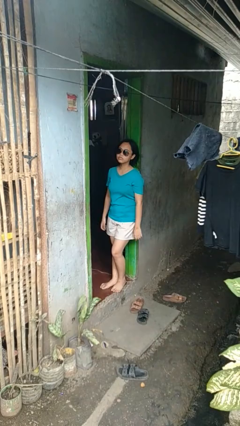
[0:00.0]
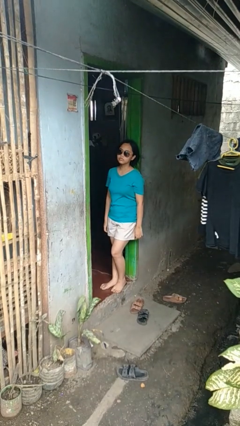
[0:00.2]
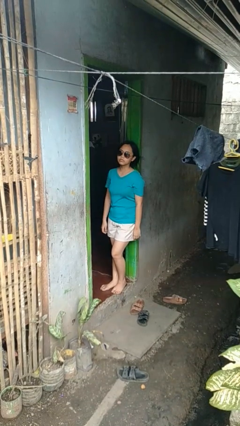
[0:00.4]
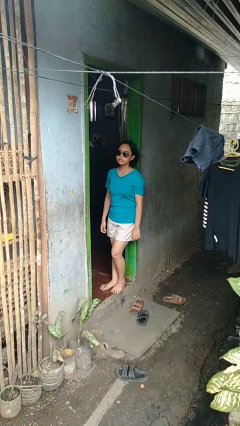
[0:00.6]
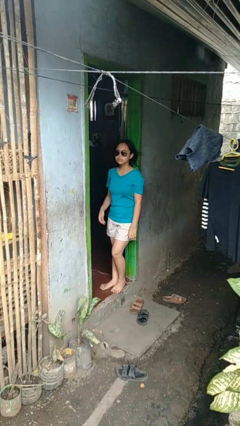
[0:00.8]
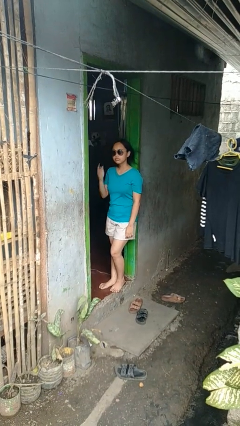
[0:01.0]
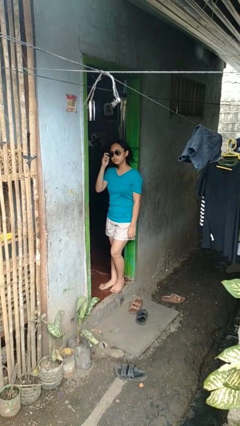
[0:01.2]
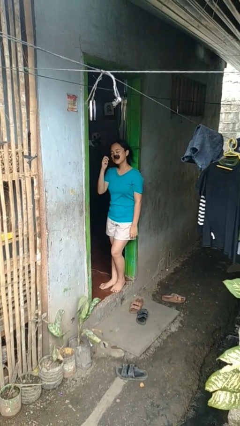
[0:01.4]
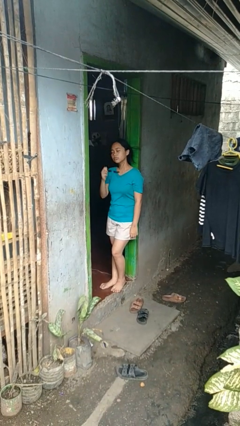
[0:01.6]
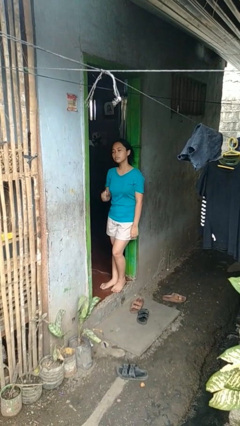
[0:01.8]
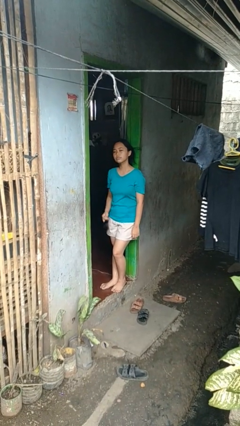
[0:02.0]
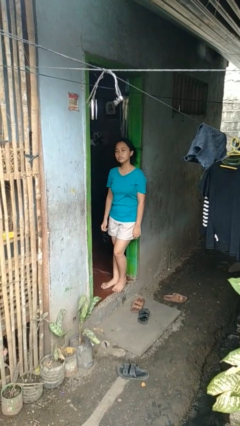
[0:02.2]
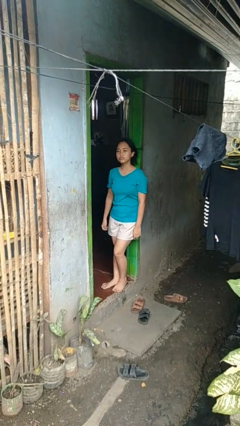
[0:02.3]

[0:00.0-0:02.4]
person takes off sunglasses

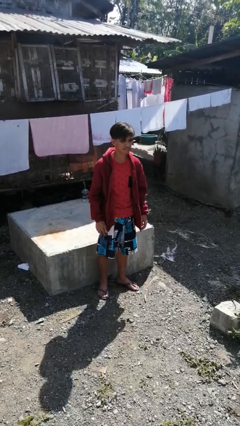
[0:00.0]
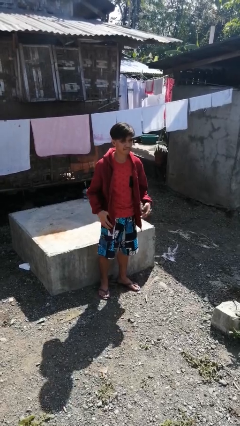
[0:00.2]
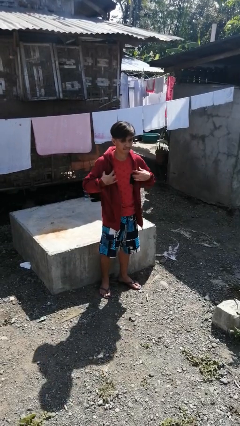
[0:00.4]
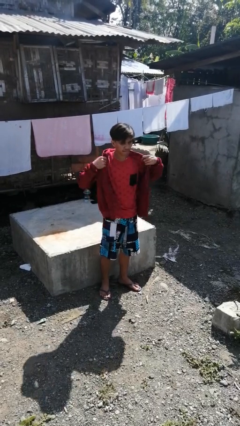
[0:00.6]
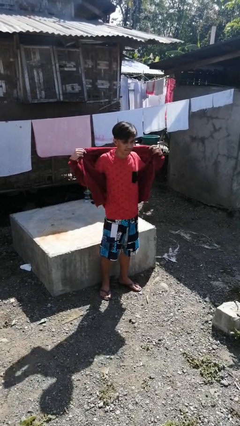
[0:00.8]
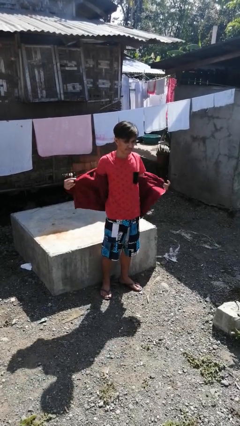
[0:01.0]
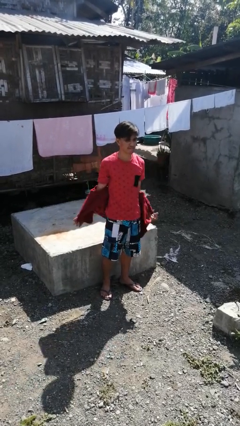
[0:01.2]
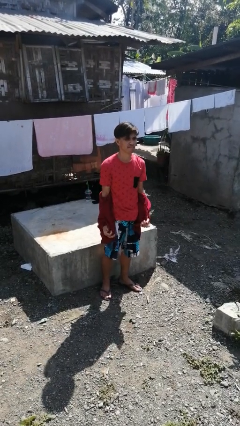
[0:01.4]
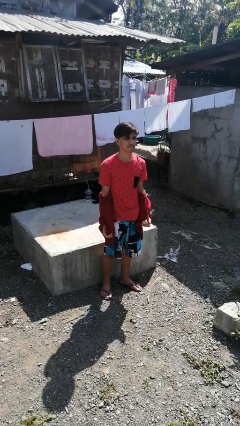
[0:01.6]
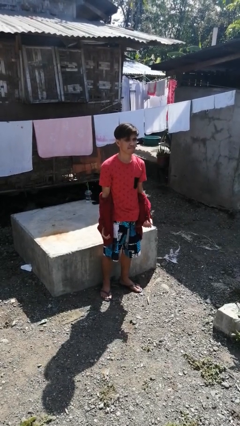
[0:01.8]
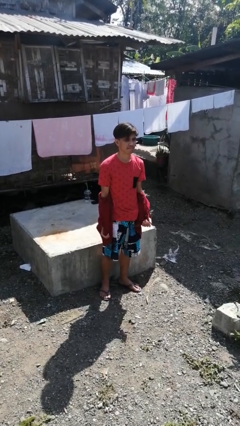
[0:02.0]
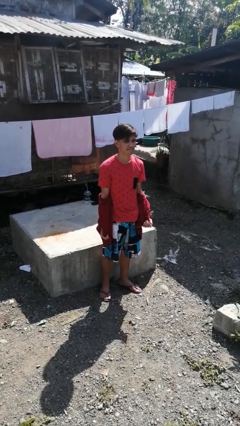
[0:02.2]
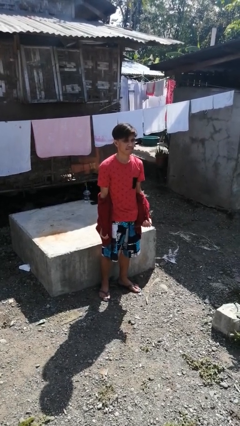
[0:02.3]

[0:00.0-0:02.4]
person takes off jacket

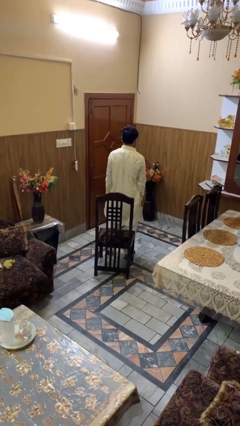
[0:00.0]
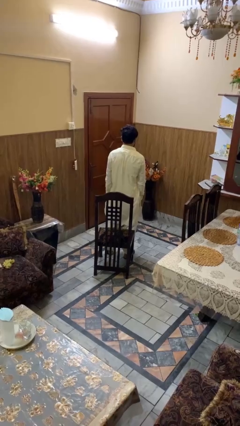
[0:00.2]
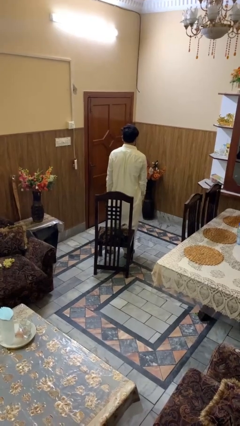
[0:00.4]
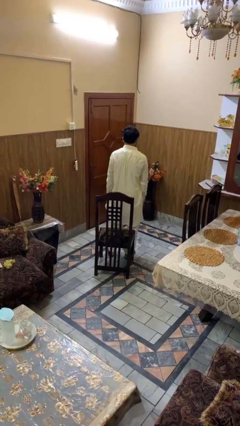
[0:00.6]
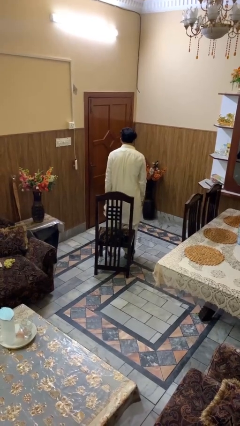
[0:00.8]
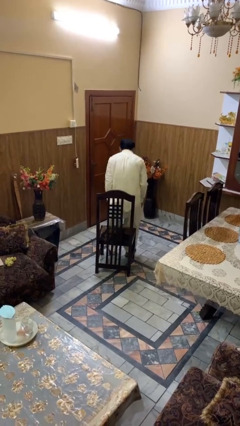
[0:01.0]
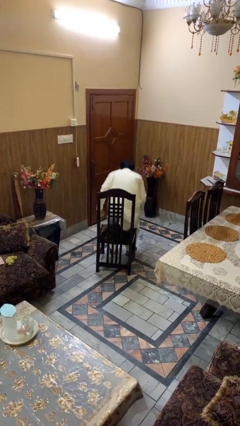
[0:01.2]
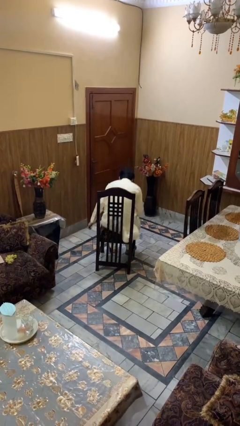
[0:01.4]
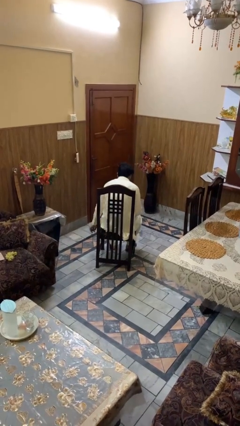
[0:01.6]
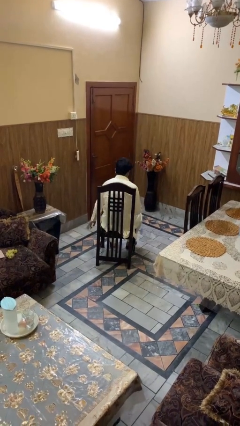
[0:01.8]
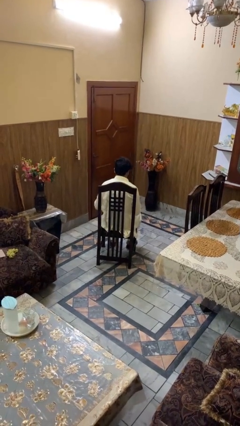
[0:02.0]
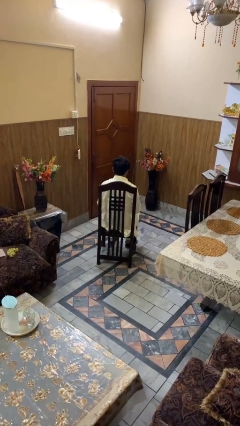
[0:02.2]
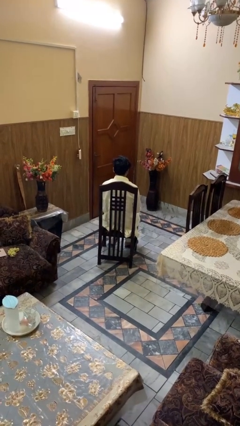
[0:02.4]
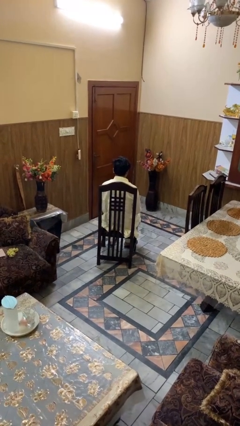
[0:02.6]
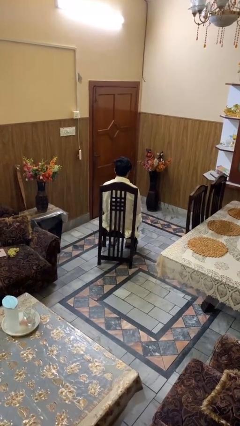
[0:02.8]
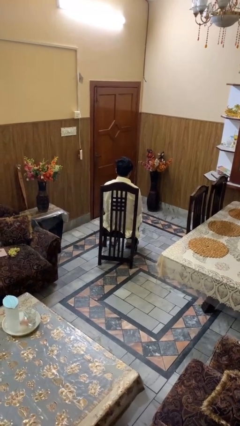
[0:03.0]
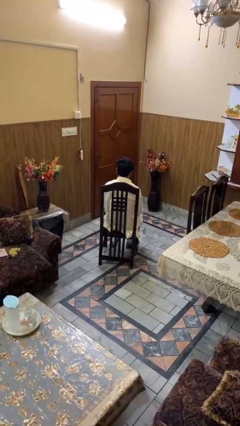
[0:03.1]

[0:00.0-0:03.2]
person sits down

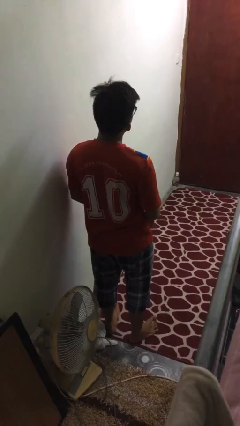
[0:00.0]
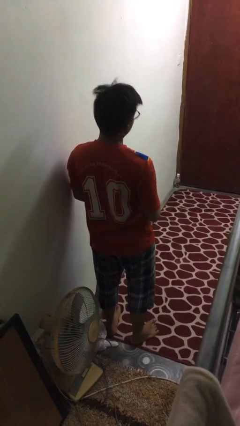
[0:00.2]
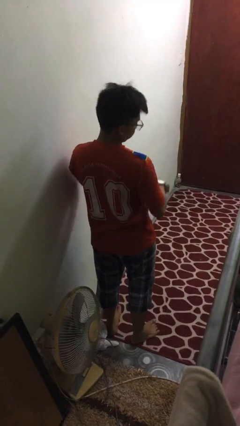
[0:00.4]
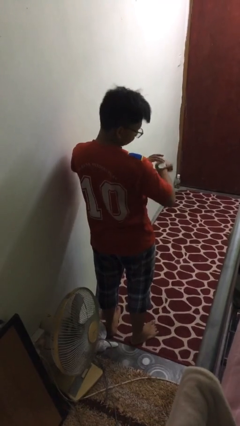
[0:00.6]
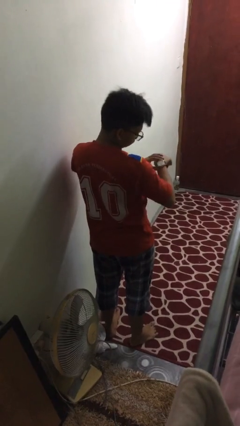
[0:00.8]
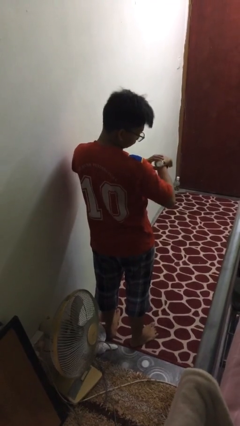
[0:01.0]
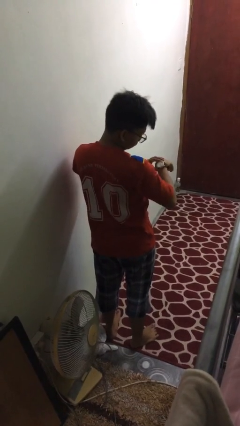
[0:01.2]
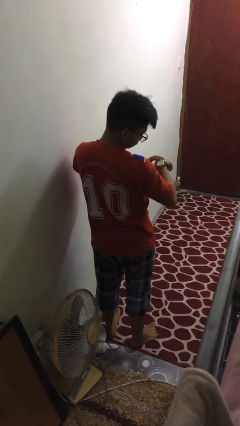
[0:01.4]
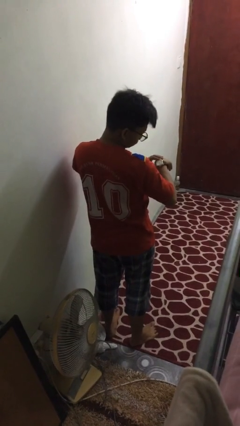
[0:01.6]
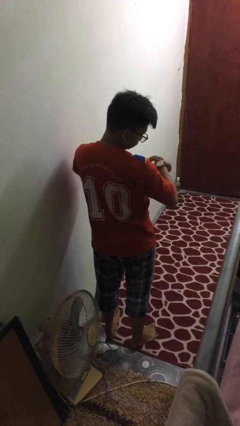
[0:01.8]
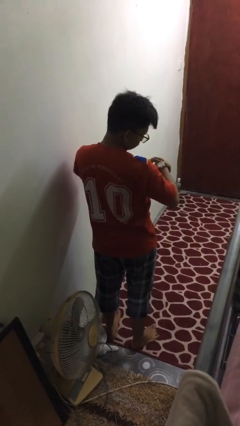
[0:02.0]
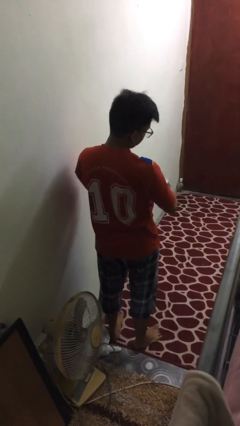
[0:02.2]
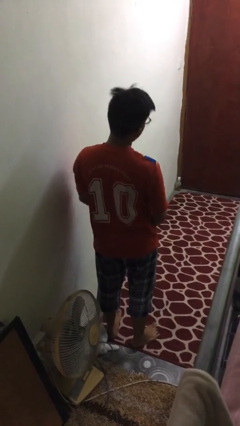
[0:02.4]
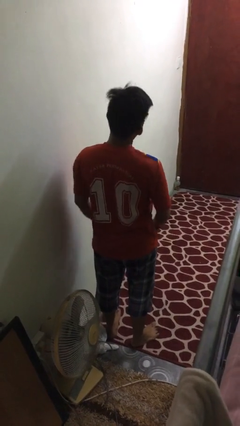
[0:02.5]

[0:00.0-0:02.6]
person looks at wristwatch

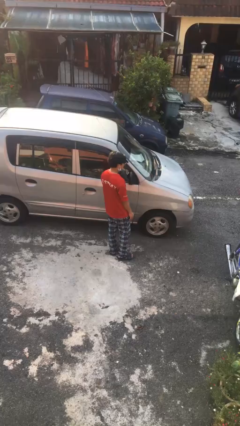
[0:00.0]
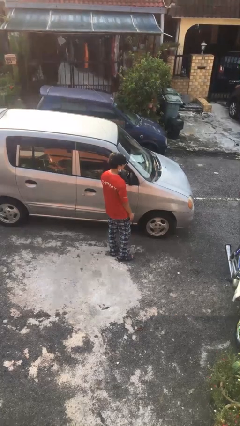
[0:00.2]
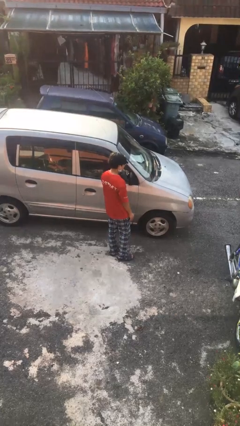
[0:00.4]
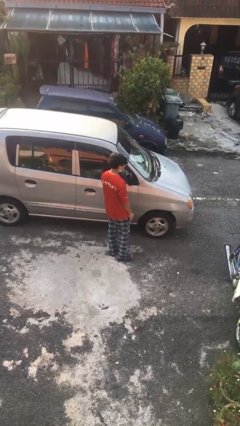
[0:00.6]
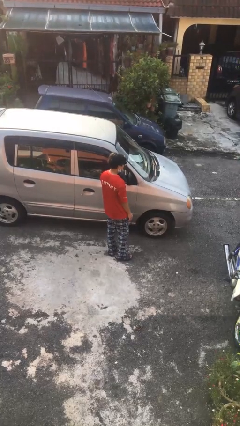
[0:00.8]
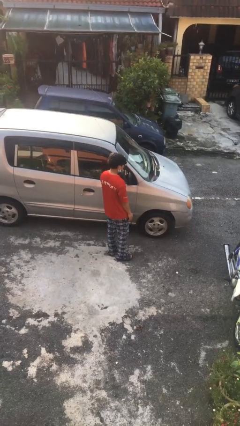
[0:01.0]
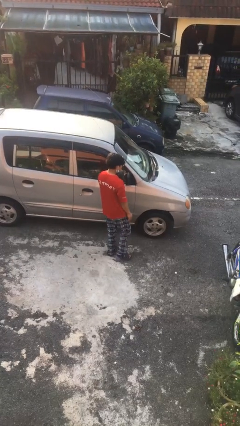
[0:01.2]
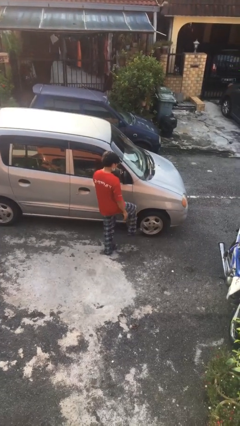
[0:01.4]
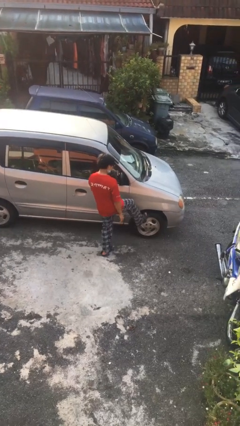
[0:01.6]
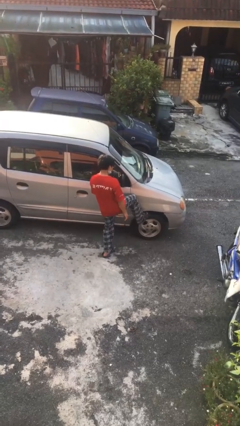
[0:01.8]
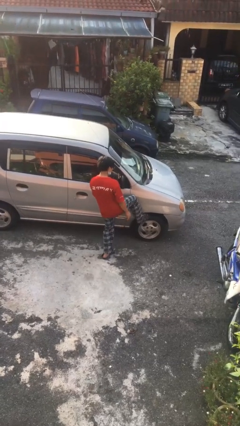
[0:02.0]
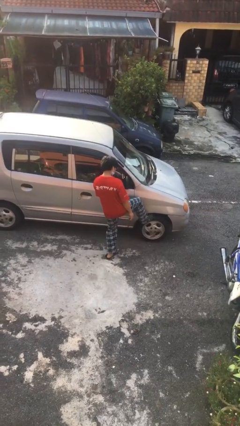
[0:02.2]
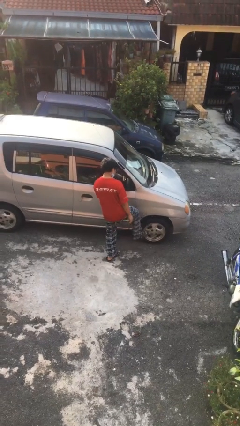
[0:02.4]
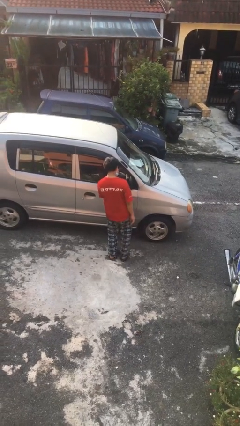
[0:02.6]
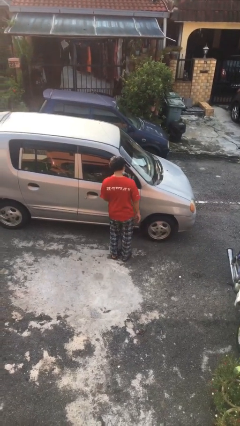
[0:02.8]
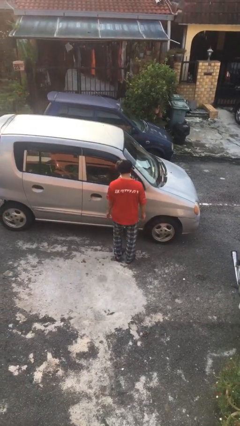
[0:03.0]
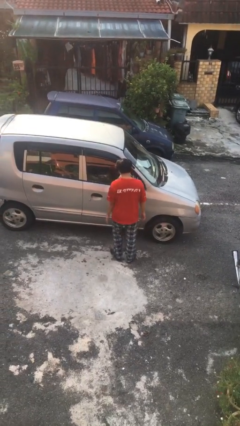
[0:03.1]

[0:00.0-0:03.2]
person kicks car tires

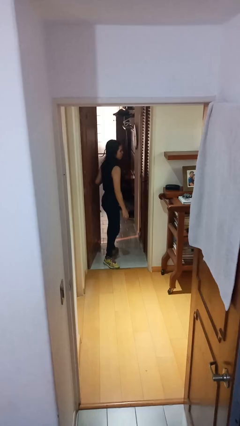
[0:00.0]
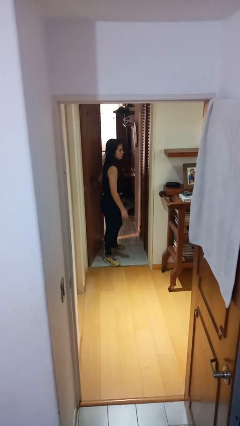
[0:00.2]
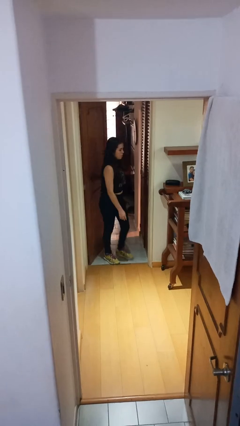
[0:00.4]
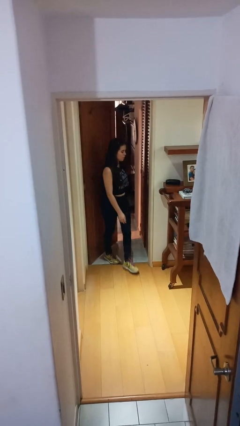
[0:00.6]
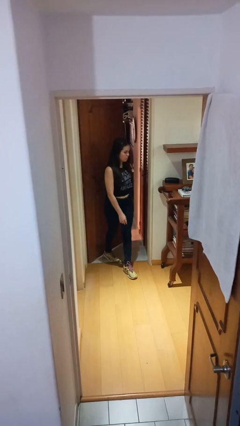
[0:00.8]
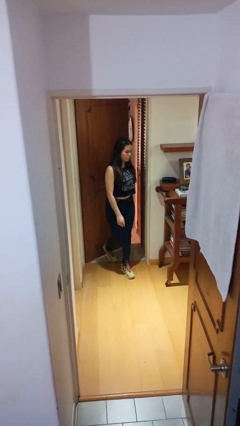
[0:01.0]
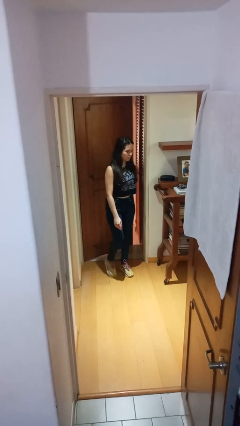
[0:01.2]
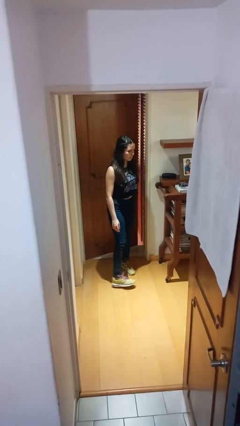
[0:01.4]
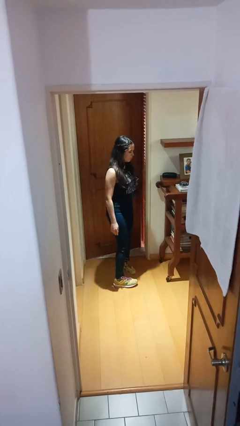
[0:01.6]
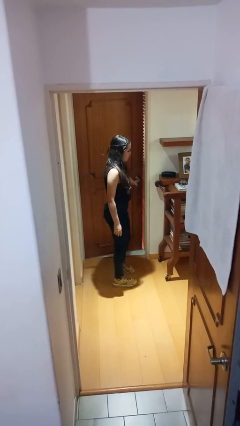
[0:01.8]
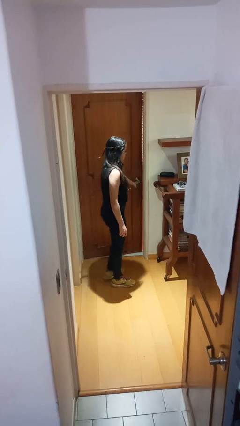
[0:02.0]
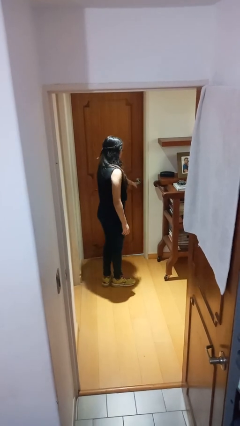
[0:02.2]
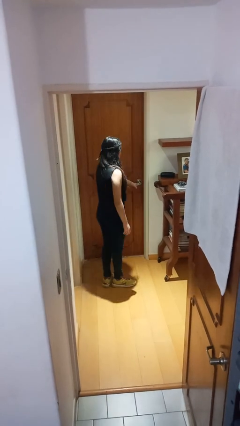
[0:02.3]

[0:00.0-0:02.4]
person closes facility door

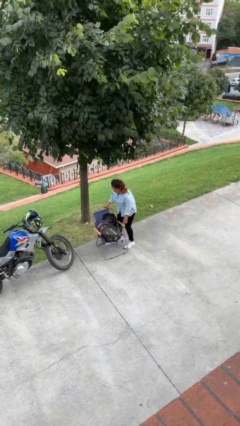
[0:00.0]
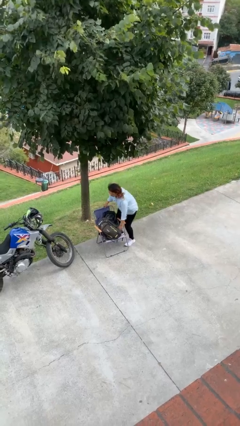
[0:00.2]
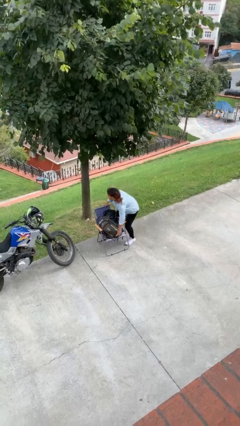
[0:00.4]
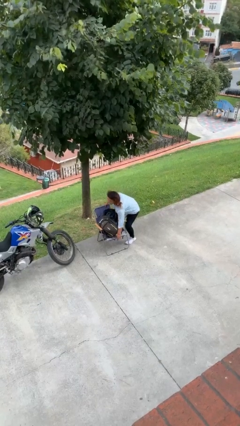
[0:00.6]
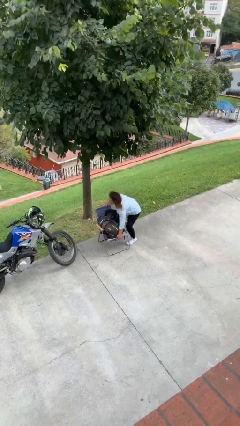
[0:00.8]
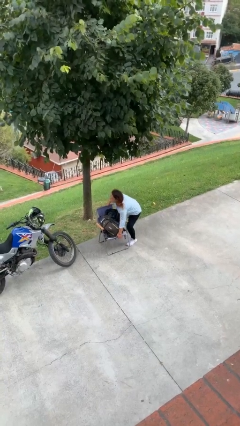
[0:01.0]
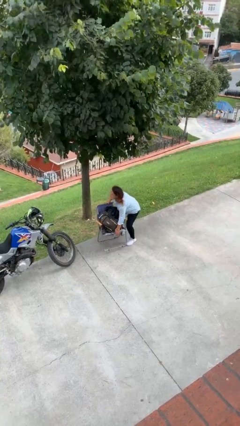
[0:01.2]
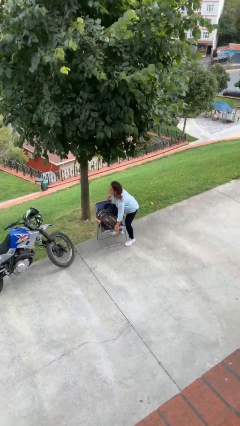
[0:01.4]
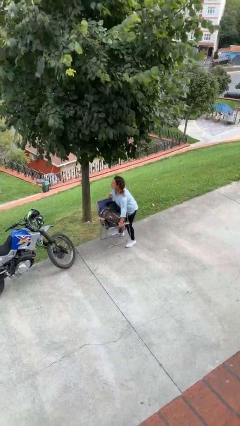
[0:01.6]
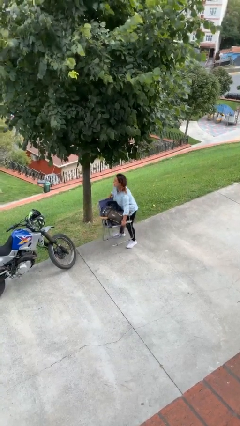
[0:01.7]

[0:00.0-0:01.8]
person picks up object from floor
